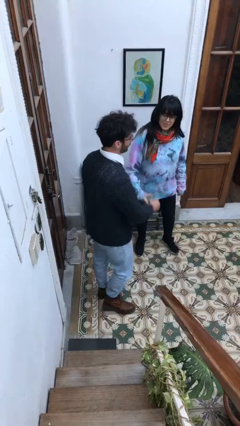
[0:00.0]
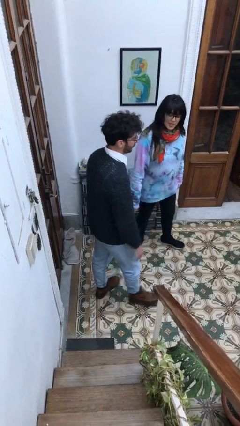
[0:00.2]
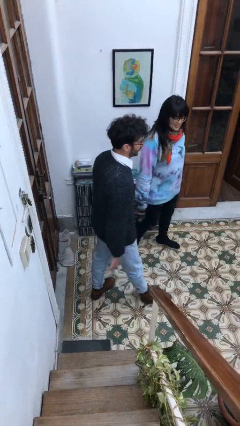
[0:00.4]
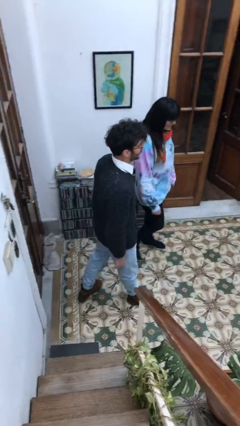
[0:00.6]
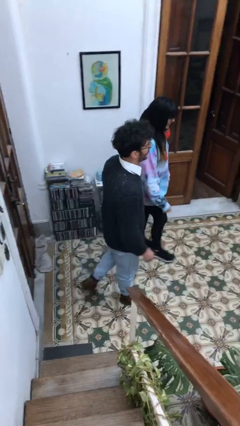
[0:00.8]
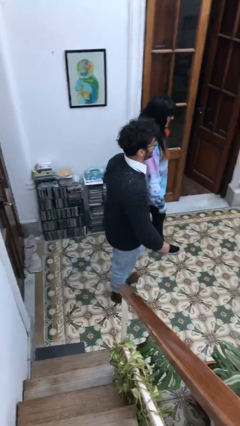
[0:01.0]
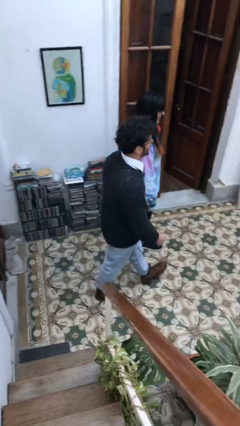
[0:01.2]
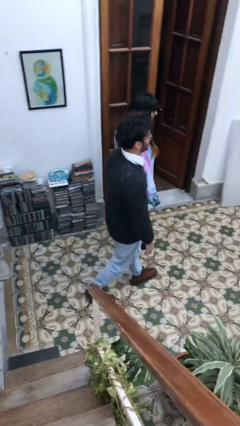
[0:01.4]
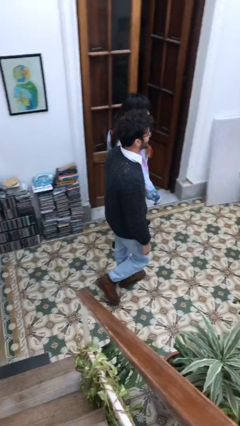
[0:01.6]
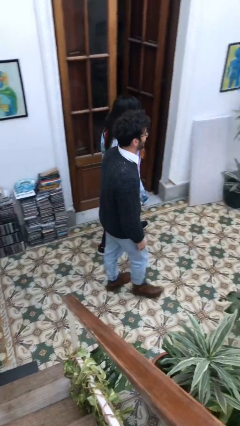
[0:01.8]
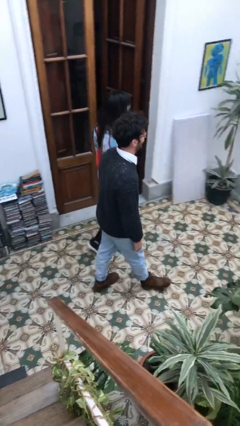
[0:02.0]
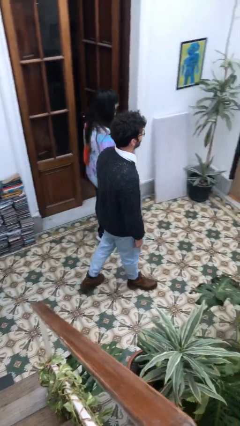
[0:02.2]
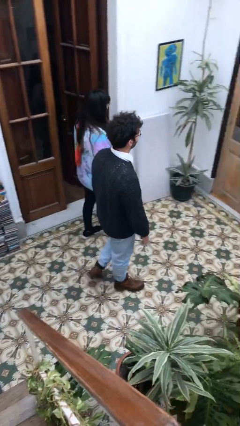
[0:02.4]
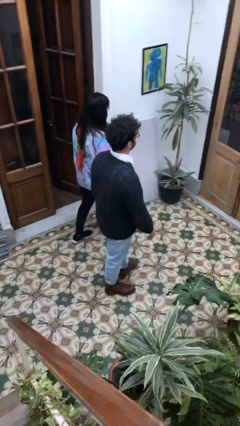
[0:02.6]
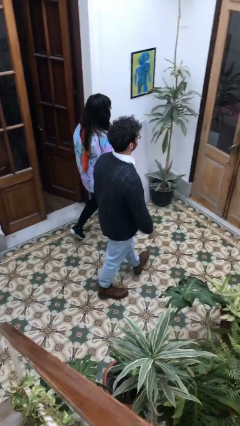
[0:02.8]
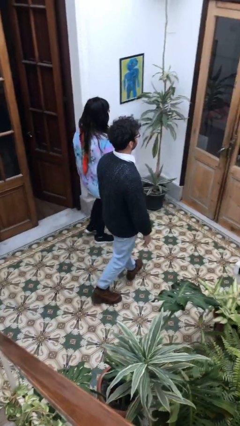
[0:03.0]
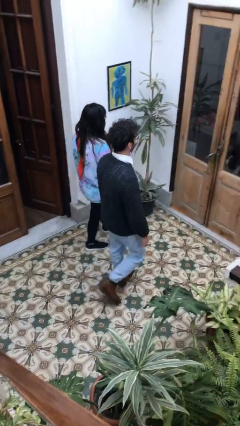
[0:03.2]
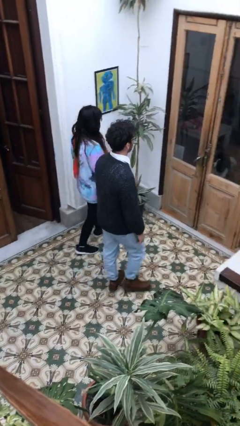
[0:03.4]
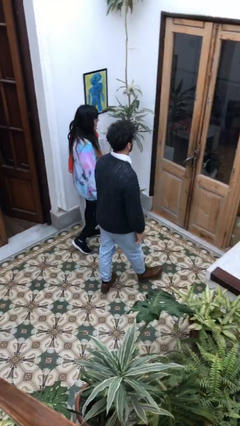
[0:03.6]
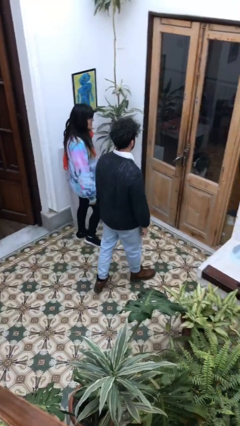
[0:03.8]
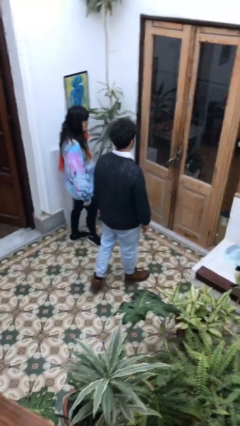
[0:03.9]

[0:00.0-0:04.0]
person talks to person

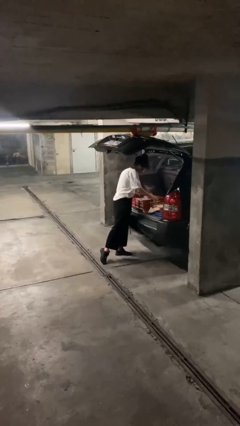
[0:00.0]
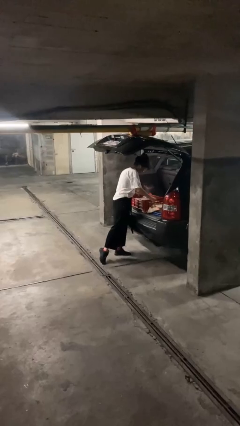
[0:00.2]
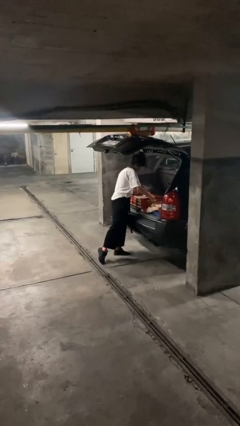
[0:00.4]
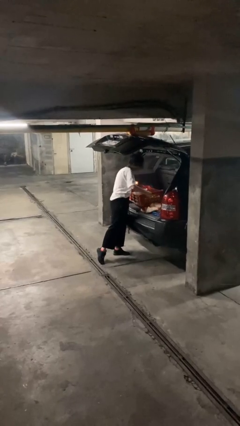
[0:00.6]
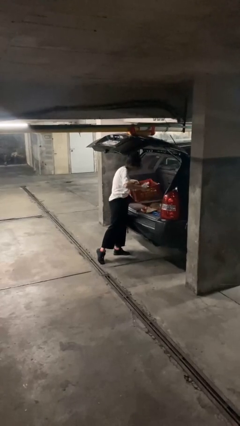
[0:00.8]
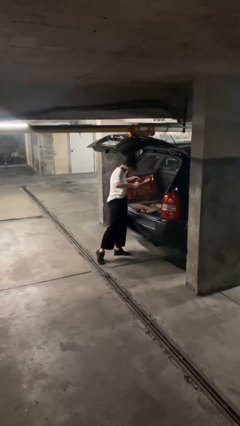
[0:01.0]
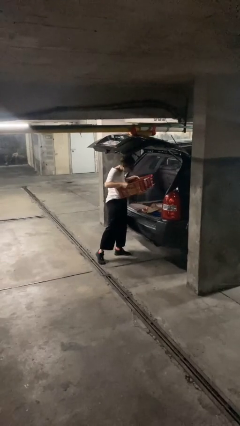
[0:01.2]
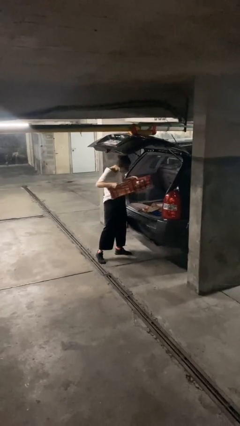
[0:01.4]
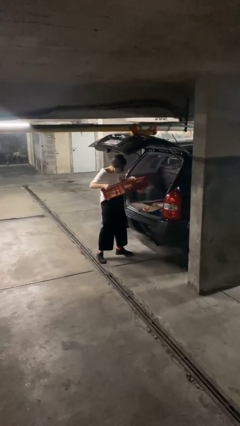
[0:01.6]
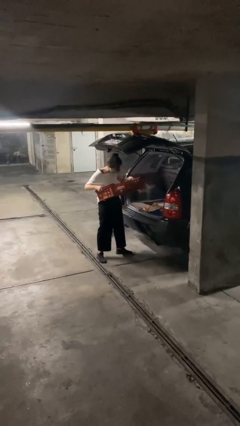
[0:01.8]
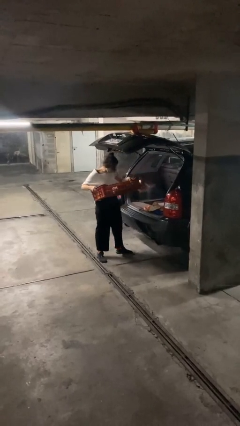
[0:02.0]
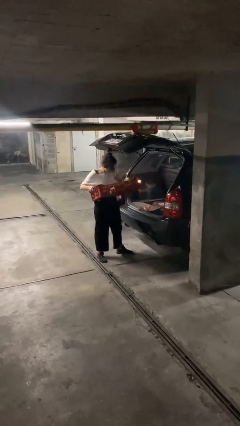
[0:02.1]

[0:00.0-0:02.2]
person unloads car

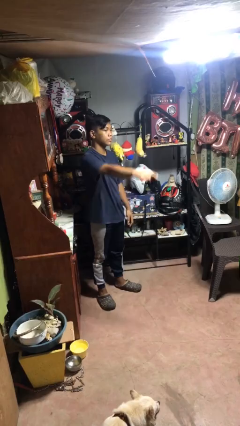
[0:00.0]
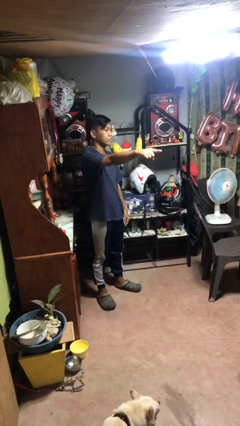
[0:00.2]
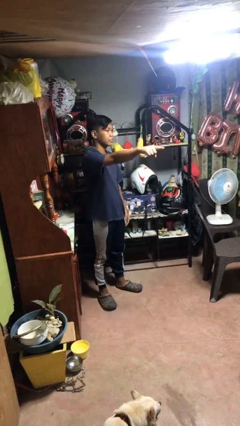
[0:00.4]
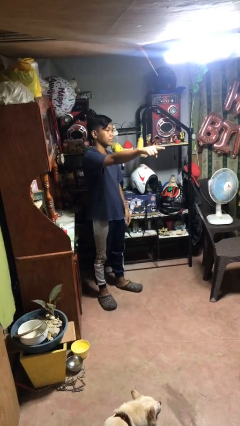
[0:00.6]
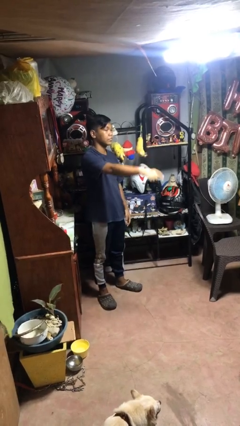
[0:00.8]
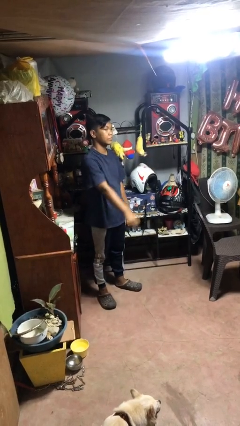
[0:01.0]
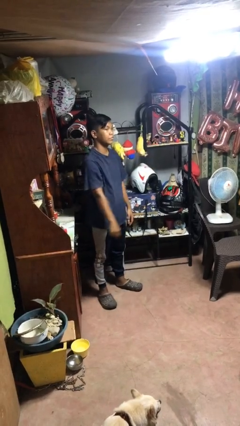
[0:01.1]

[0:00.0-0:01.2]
person points at person

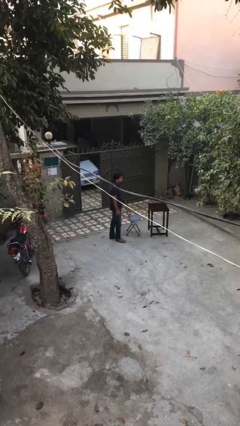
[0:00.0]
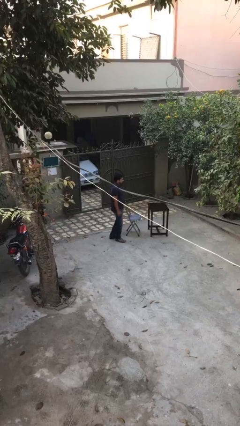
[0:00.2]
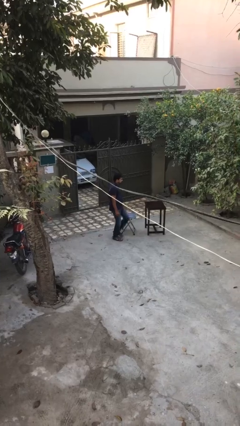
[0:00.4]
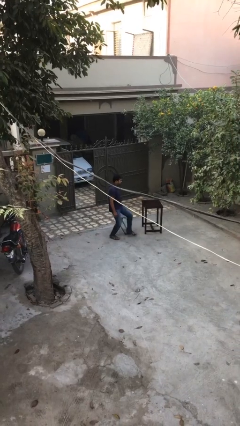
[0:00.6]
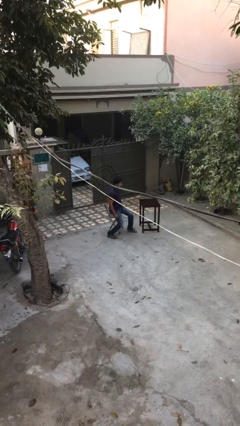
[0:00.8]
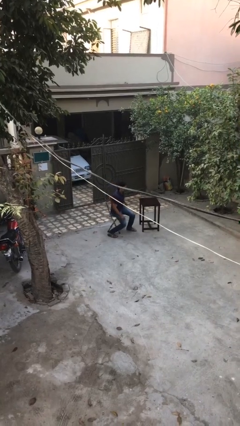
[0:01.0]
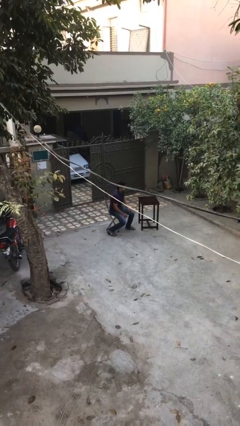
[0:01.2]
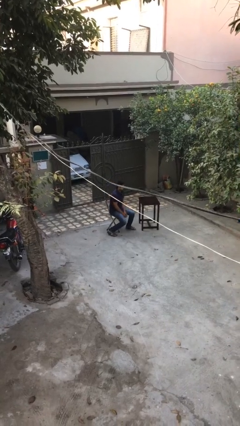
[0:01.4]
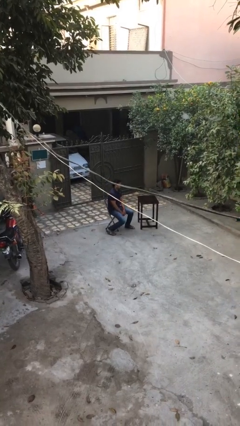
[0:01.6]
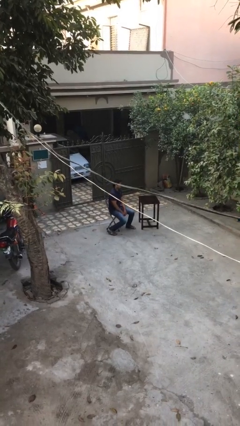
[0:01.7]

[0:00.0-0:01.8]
person sits down

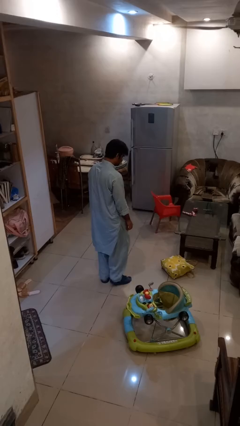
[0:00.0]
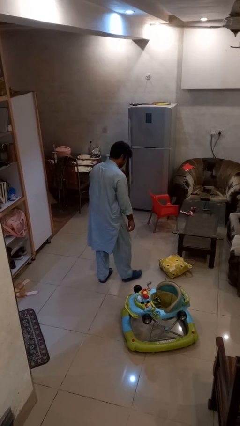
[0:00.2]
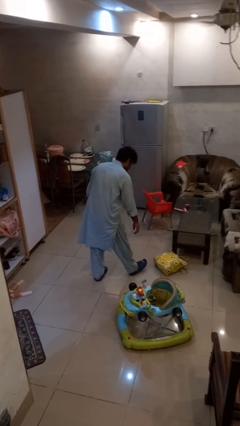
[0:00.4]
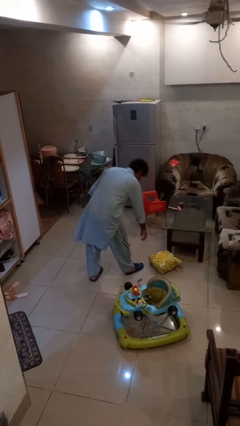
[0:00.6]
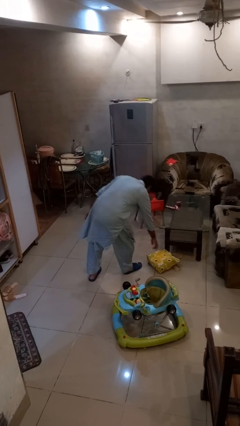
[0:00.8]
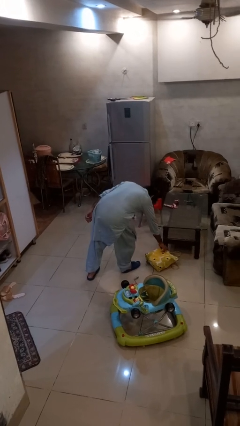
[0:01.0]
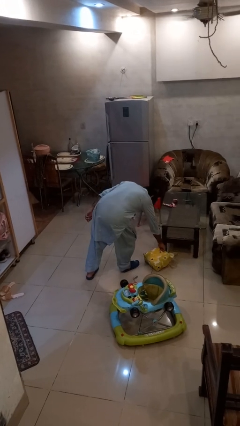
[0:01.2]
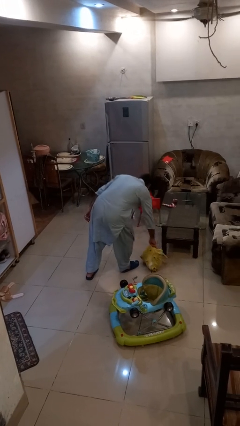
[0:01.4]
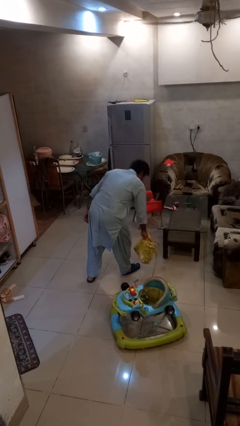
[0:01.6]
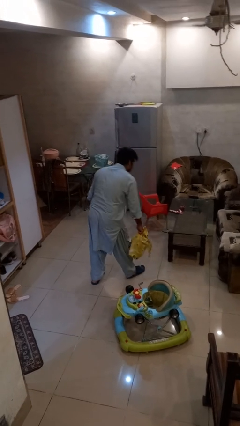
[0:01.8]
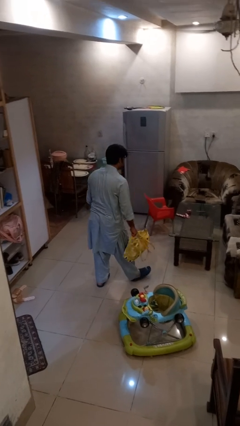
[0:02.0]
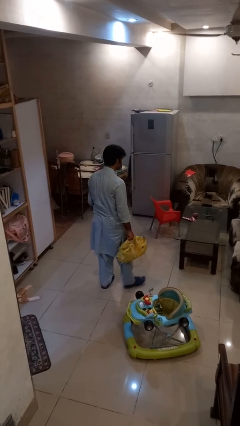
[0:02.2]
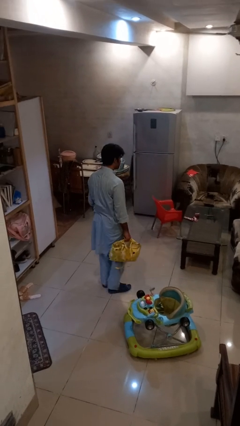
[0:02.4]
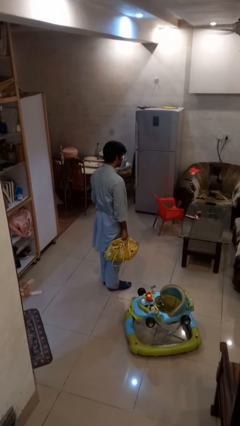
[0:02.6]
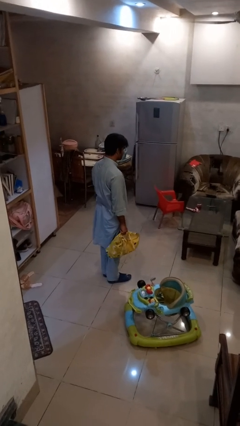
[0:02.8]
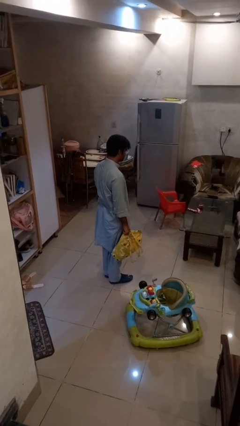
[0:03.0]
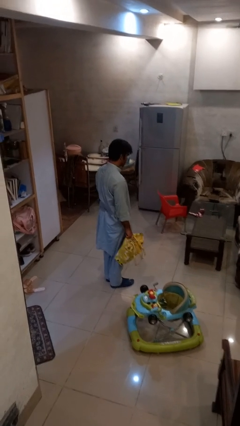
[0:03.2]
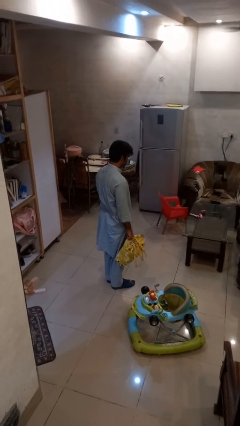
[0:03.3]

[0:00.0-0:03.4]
person picks up object from floor

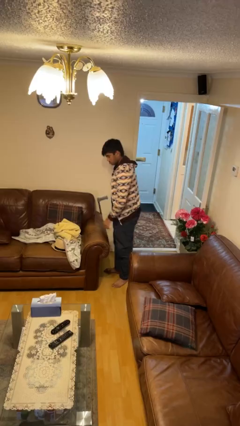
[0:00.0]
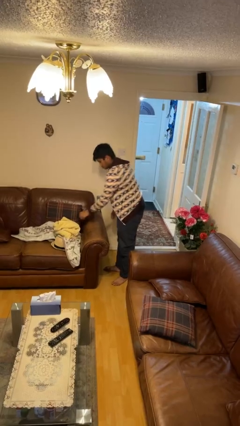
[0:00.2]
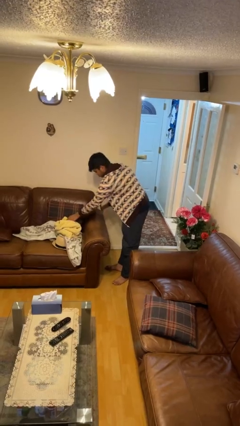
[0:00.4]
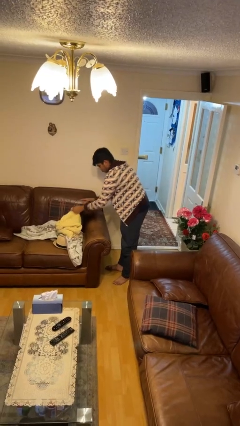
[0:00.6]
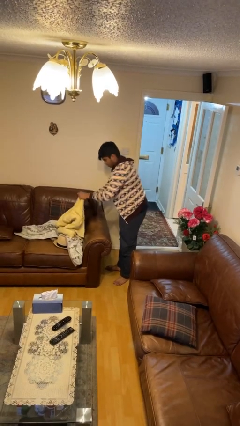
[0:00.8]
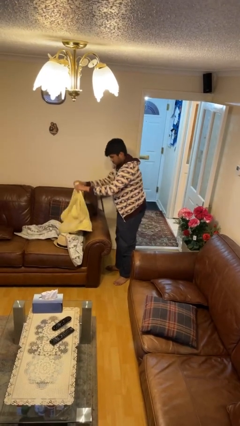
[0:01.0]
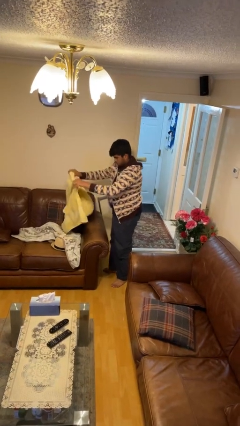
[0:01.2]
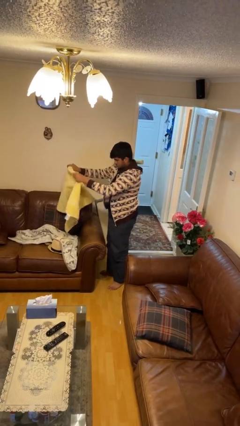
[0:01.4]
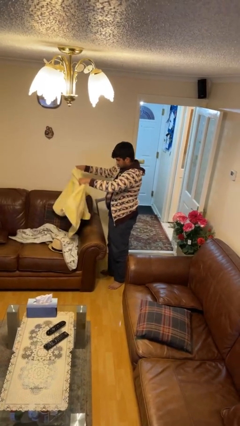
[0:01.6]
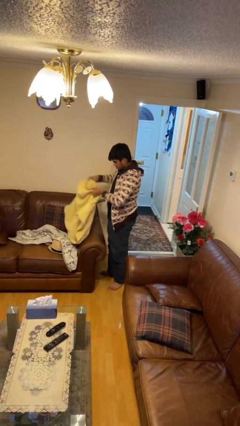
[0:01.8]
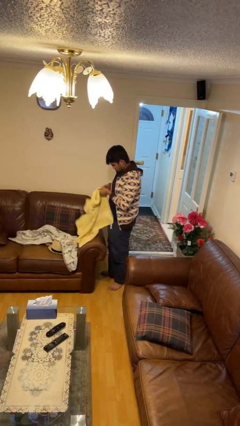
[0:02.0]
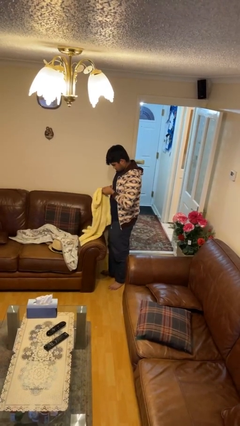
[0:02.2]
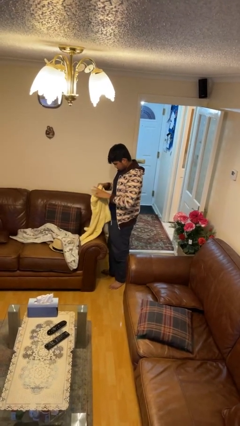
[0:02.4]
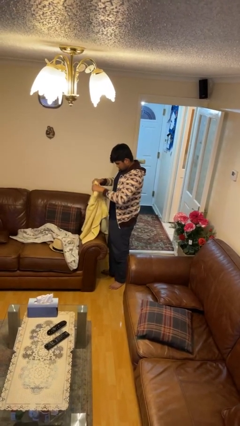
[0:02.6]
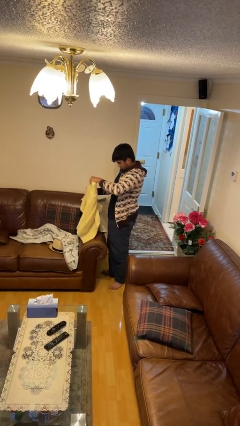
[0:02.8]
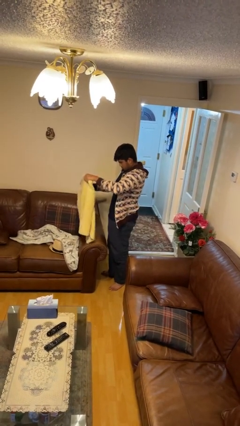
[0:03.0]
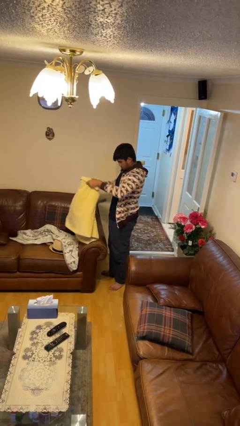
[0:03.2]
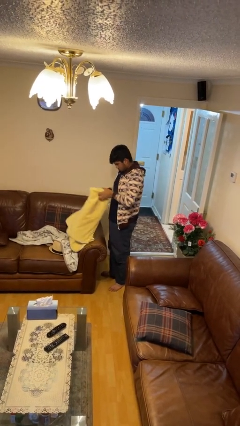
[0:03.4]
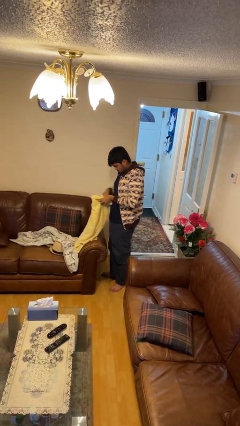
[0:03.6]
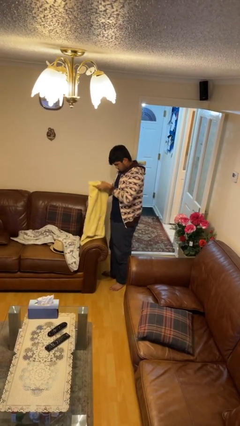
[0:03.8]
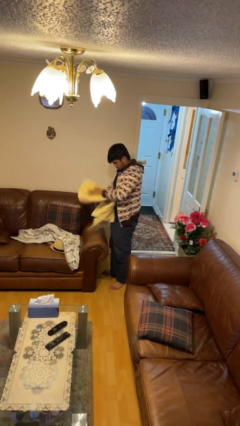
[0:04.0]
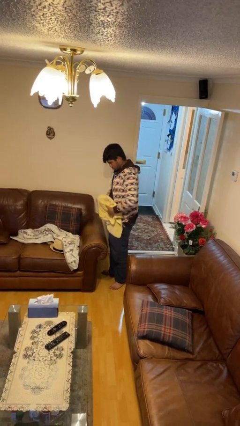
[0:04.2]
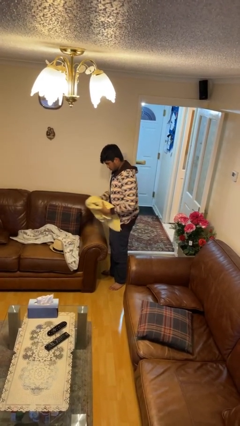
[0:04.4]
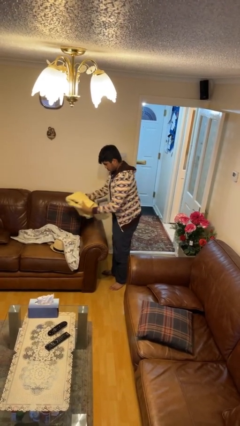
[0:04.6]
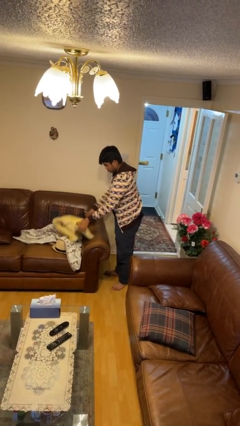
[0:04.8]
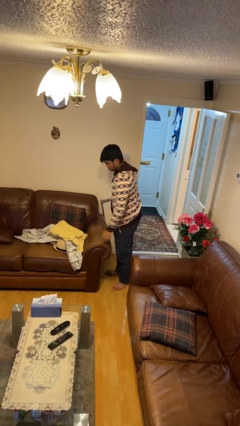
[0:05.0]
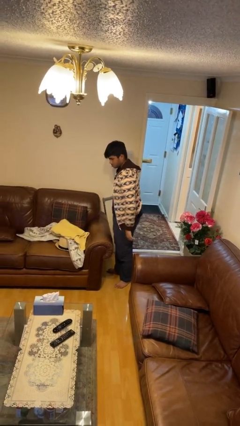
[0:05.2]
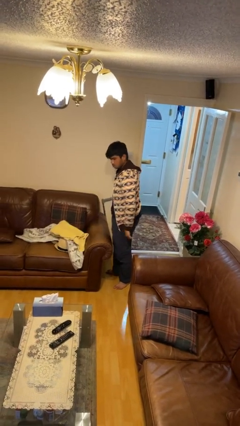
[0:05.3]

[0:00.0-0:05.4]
person folds towel
